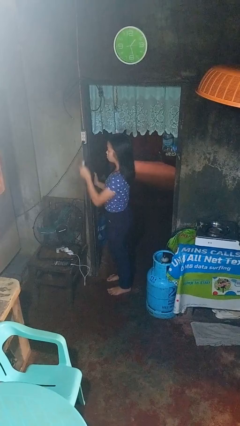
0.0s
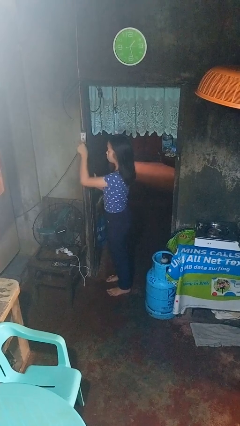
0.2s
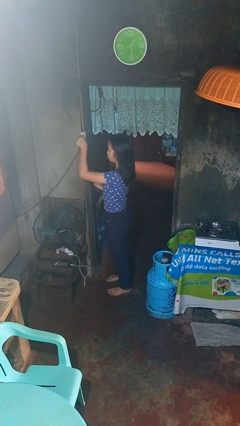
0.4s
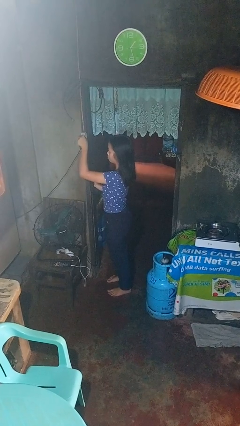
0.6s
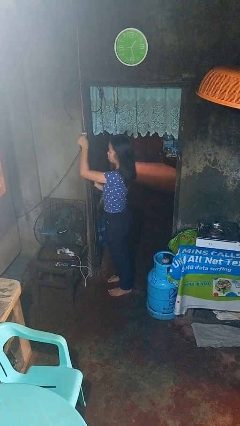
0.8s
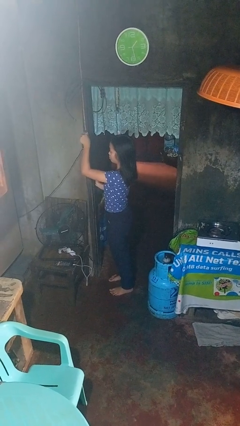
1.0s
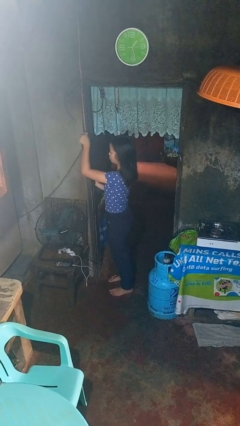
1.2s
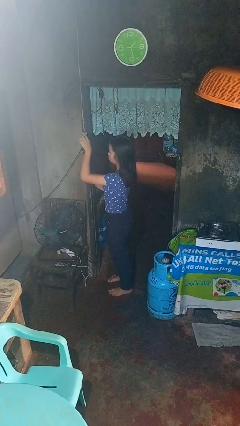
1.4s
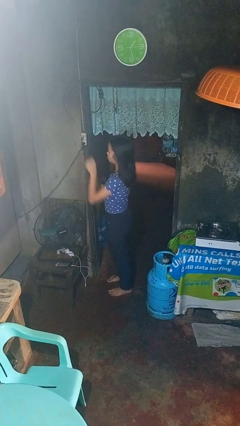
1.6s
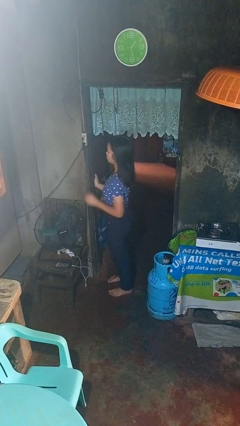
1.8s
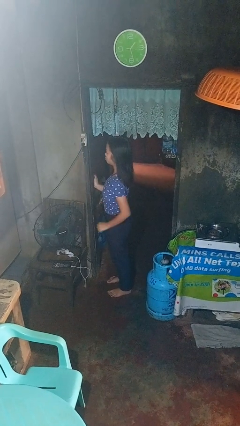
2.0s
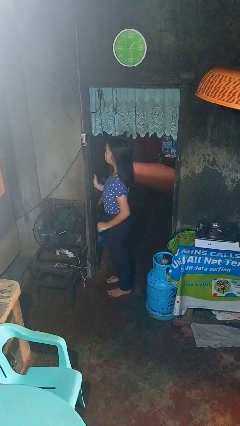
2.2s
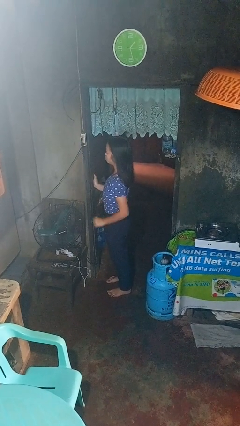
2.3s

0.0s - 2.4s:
person plugs into electrical socket

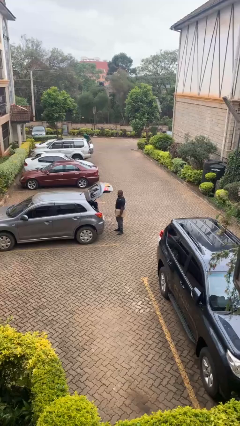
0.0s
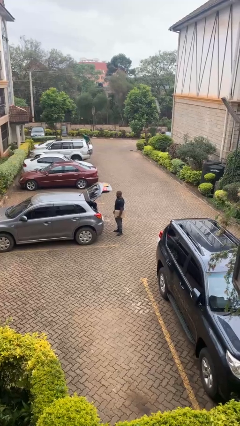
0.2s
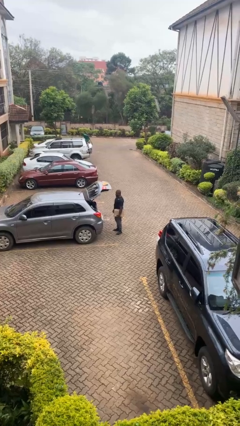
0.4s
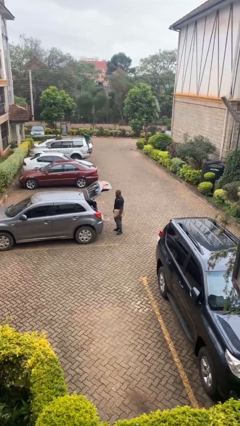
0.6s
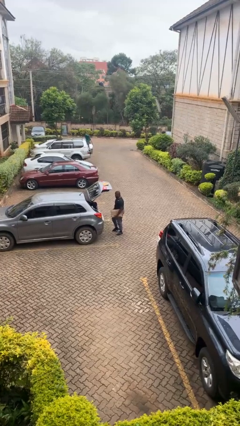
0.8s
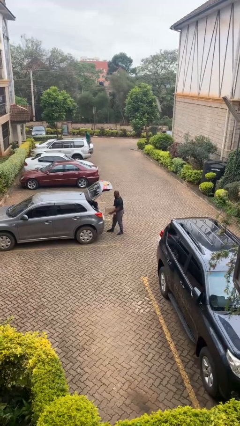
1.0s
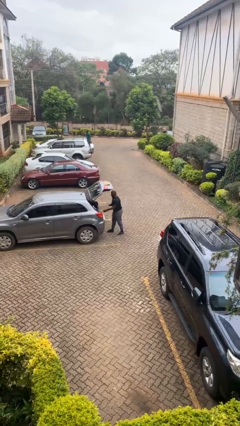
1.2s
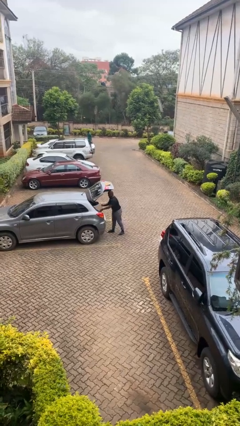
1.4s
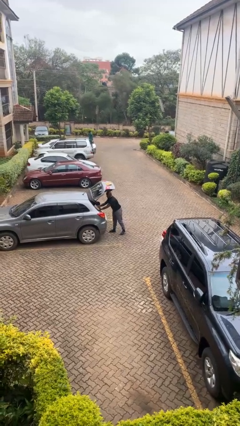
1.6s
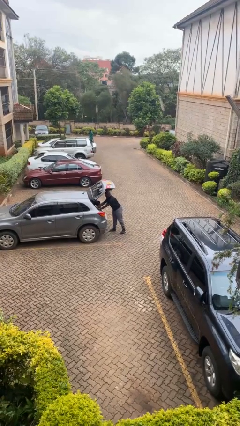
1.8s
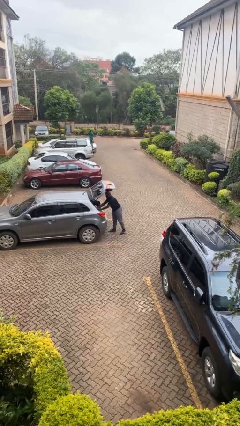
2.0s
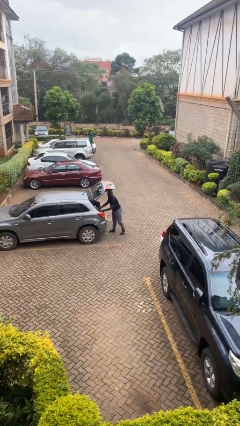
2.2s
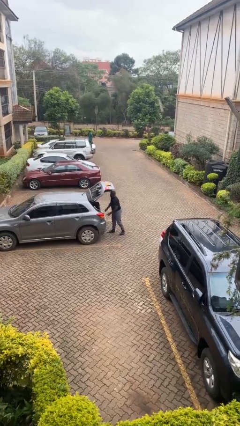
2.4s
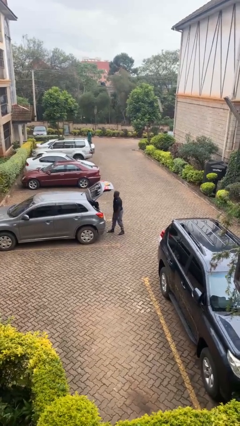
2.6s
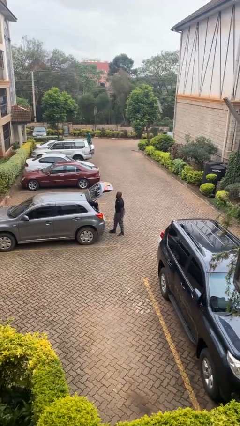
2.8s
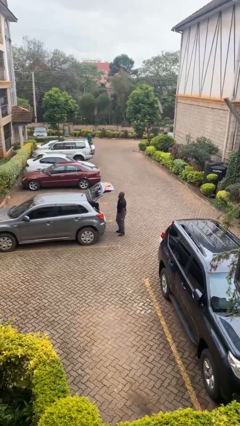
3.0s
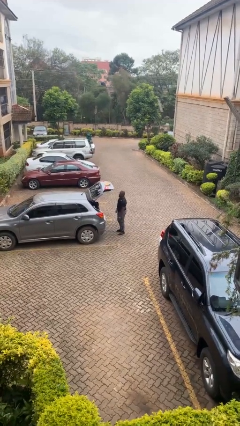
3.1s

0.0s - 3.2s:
person loads car

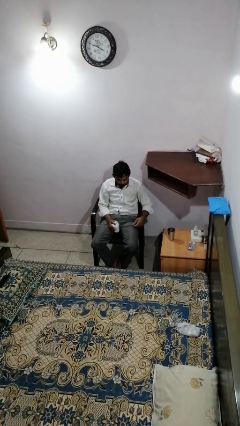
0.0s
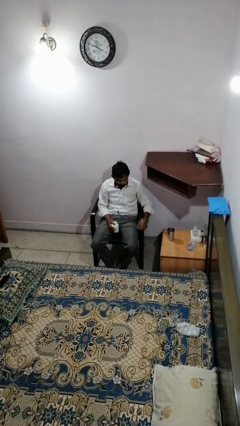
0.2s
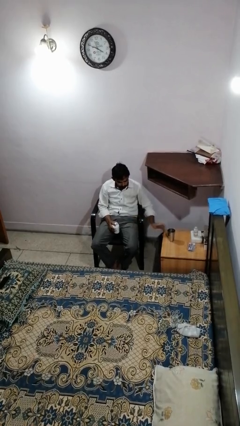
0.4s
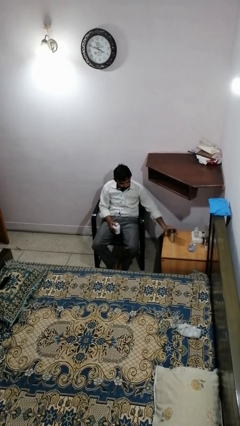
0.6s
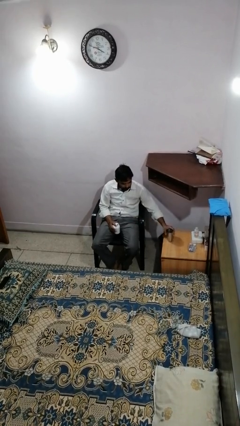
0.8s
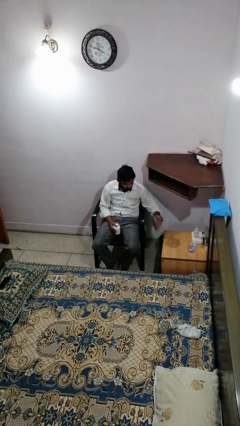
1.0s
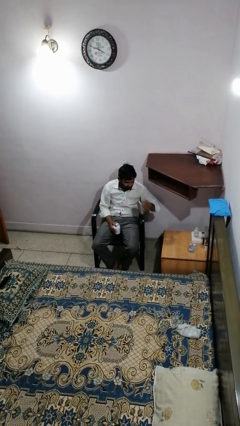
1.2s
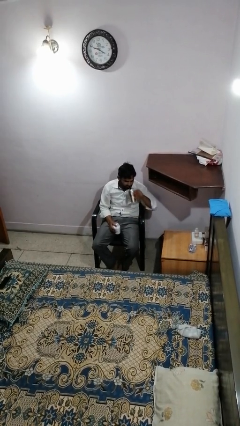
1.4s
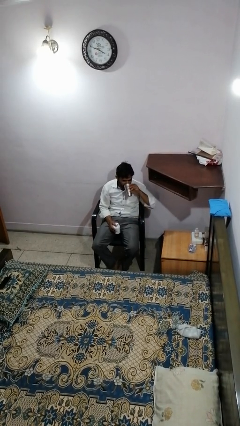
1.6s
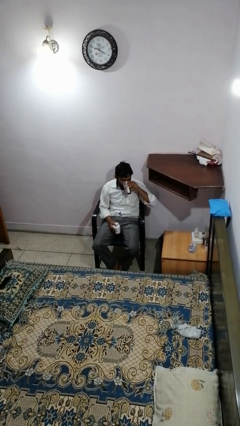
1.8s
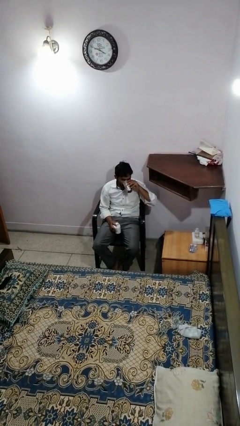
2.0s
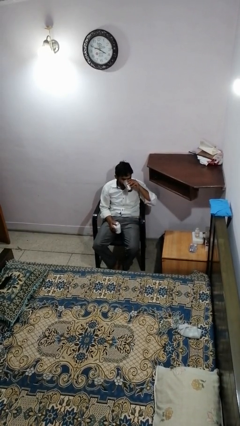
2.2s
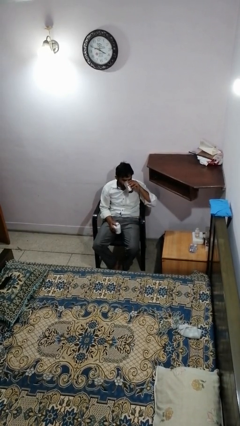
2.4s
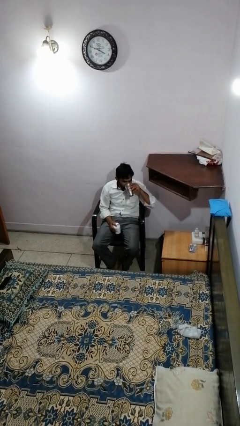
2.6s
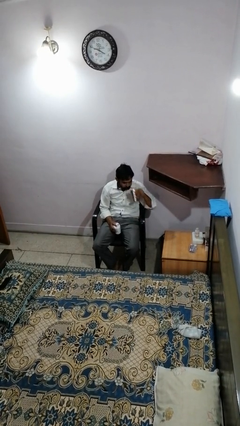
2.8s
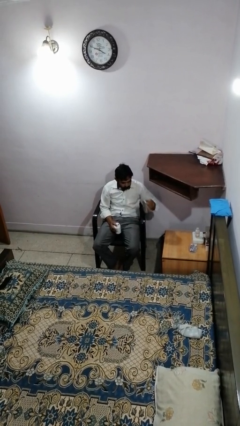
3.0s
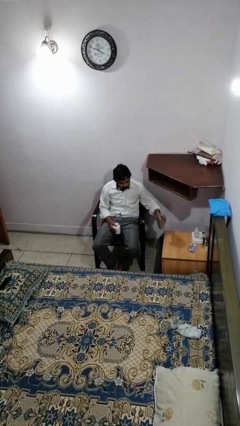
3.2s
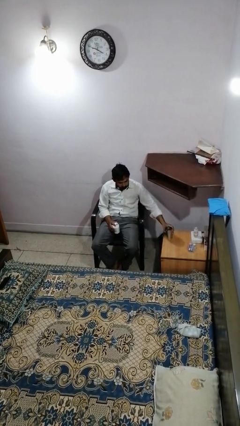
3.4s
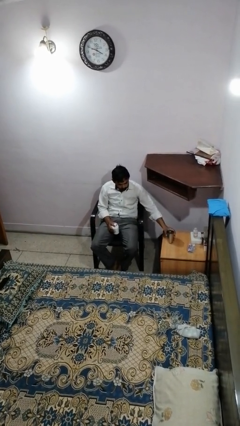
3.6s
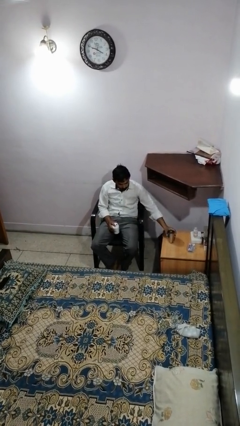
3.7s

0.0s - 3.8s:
person drinks from cup

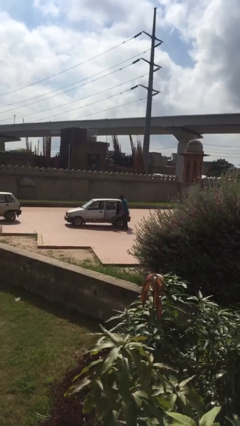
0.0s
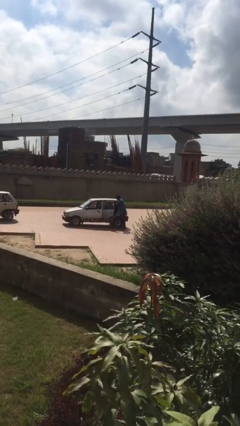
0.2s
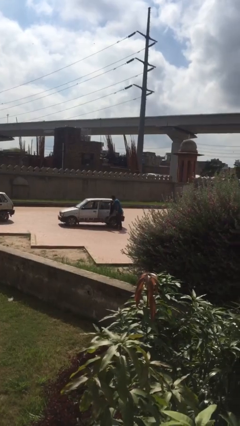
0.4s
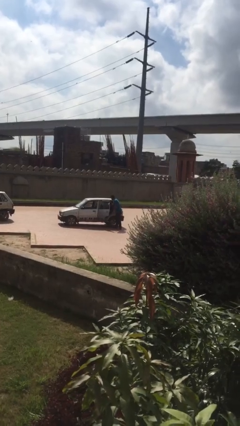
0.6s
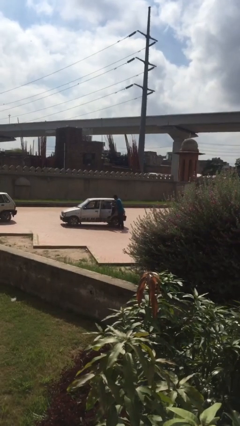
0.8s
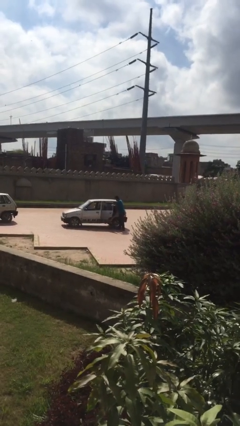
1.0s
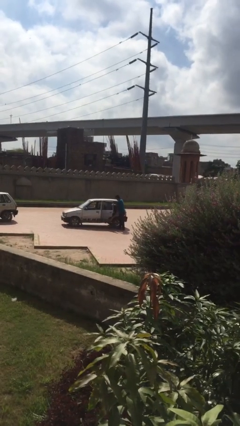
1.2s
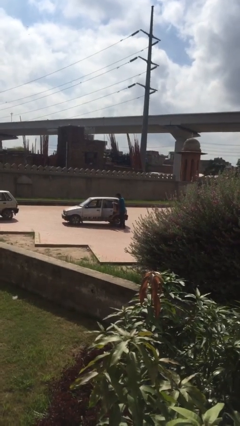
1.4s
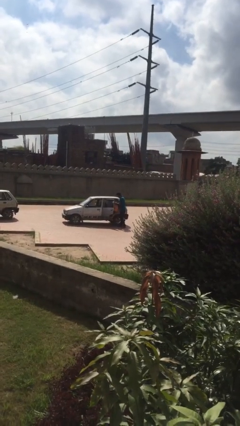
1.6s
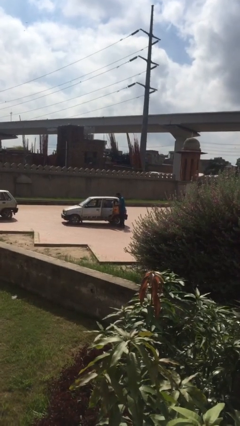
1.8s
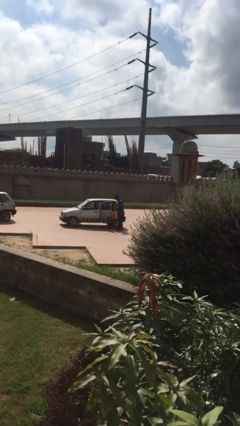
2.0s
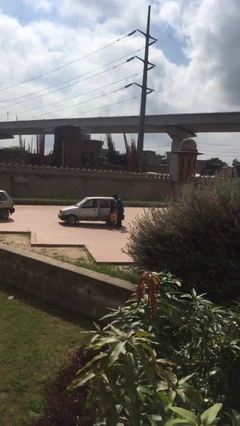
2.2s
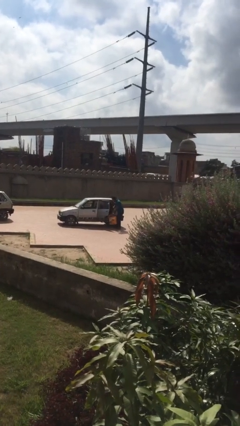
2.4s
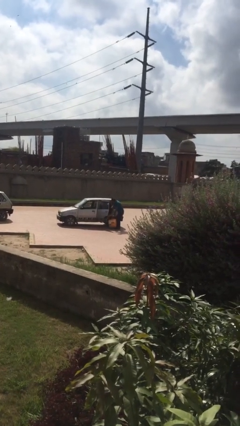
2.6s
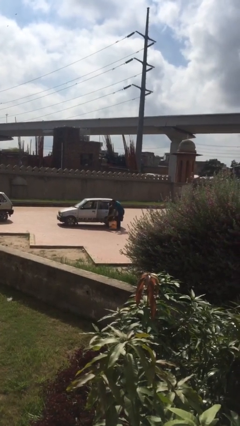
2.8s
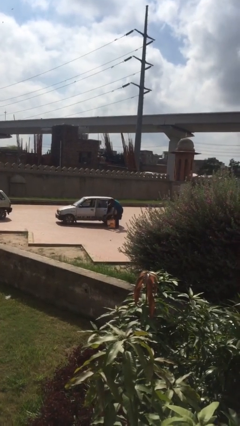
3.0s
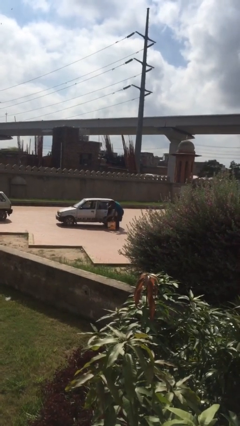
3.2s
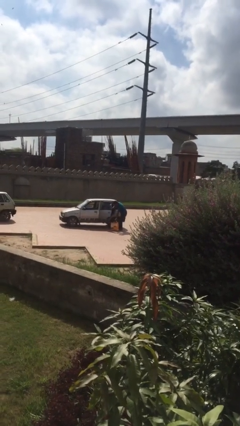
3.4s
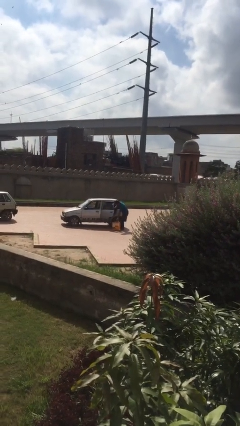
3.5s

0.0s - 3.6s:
person unloads car

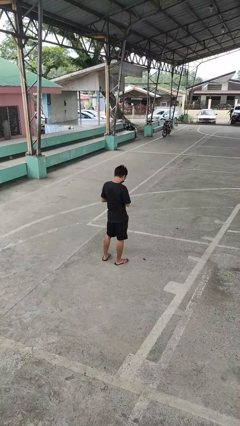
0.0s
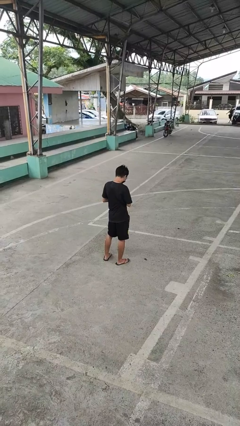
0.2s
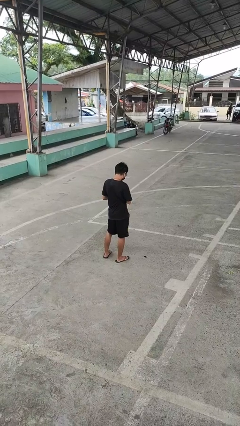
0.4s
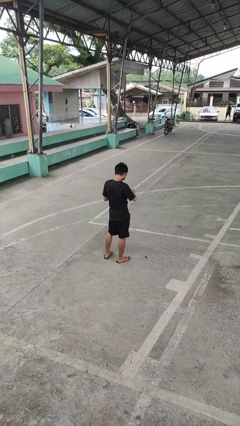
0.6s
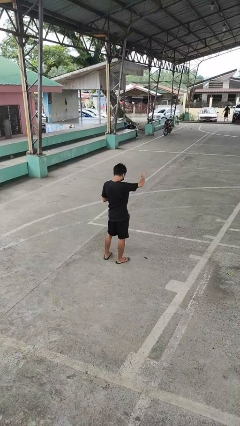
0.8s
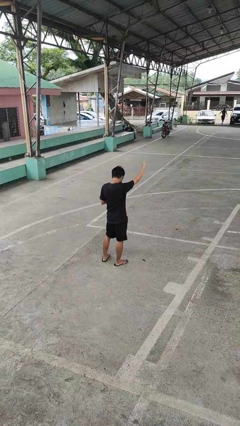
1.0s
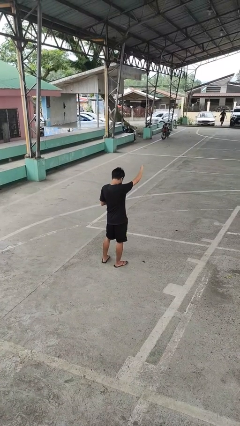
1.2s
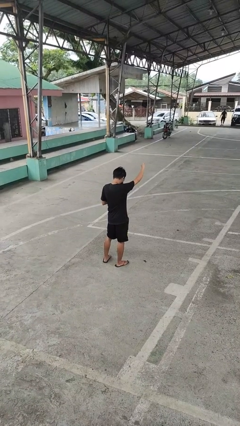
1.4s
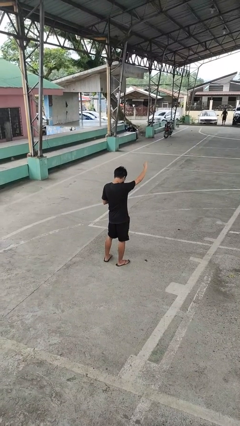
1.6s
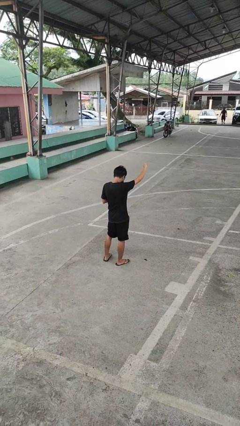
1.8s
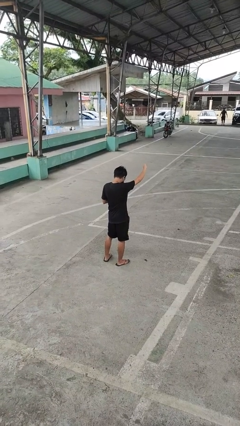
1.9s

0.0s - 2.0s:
person gestures thumbs down

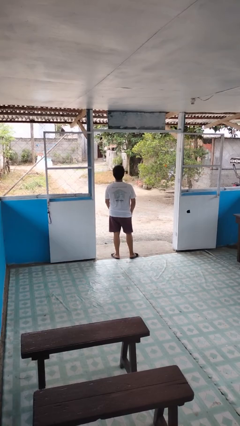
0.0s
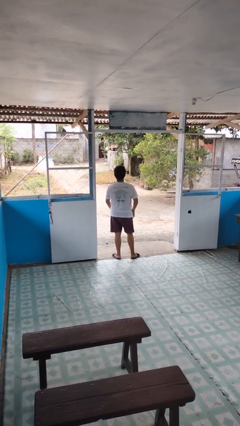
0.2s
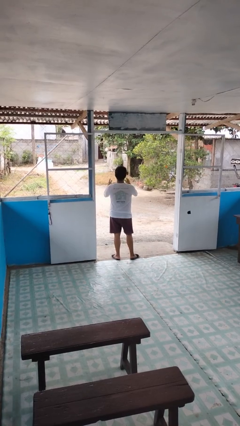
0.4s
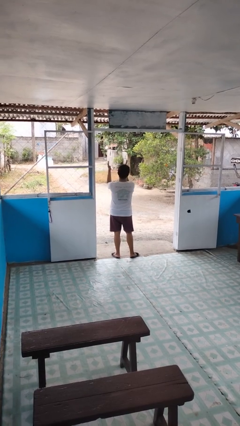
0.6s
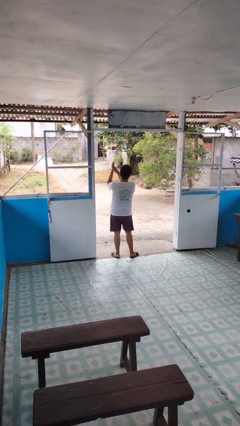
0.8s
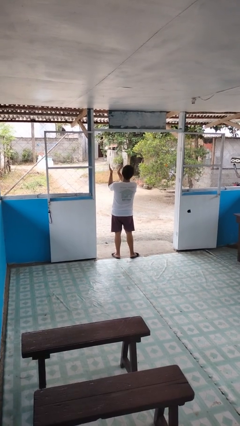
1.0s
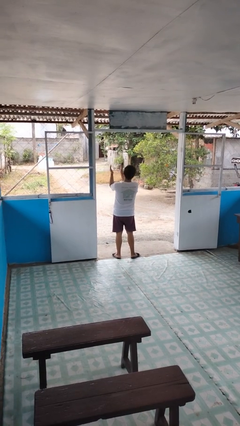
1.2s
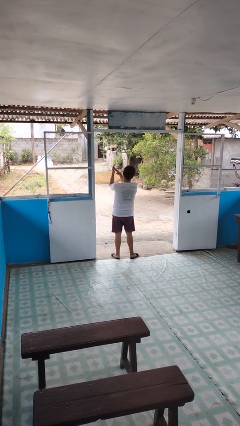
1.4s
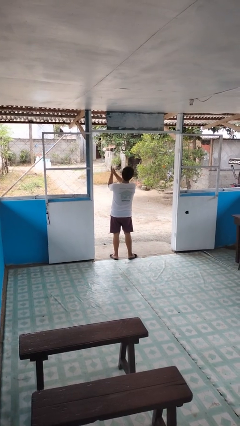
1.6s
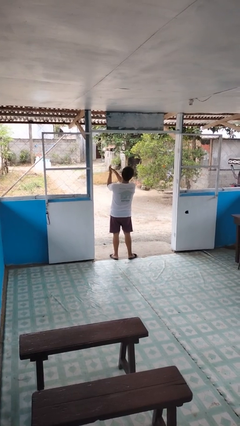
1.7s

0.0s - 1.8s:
person claps hands

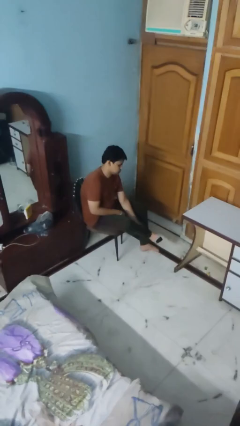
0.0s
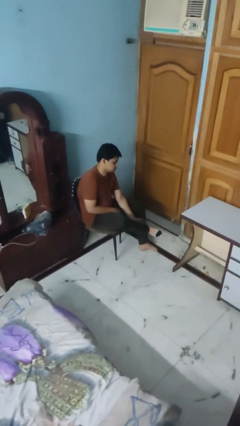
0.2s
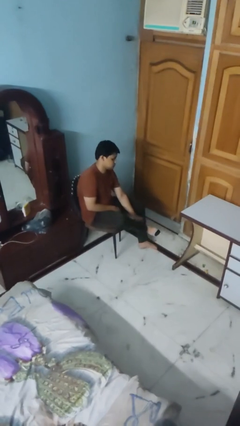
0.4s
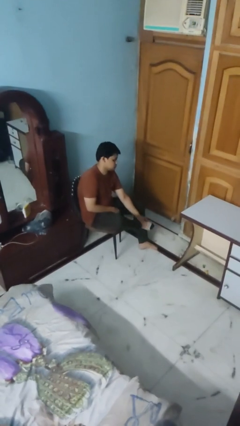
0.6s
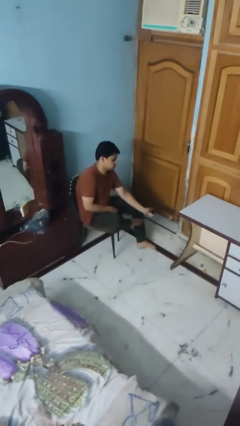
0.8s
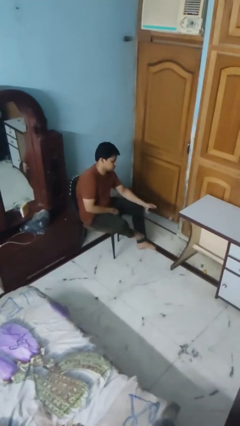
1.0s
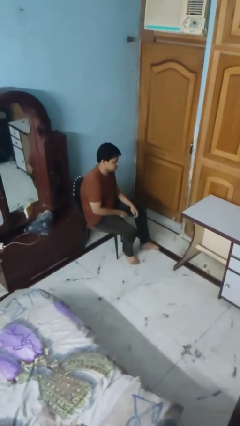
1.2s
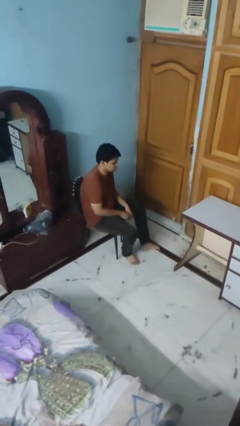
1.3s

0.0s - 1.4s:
person takes off socks
